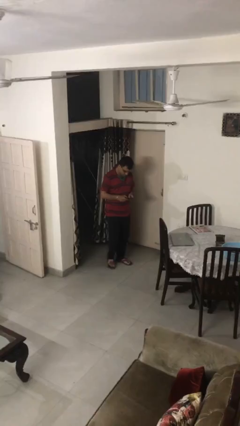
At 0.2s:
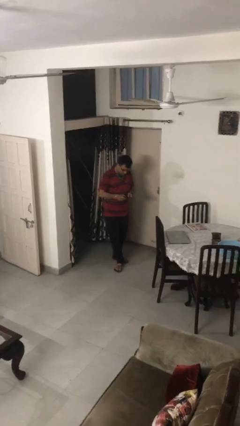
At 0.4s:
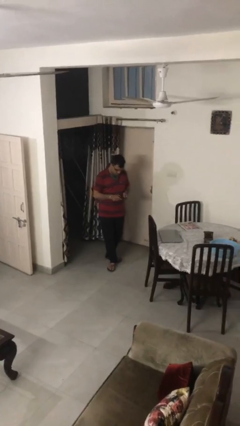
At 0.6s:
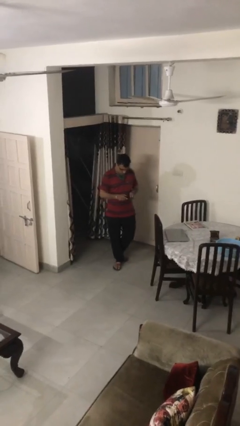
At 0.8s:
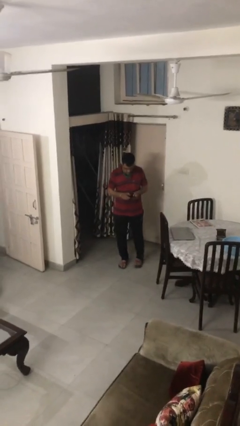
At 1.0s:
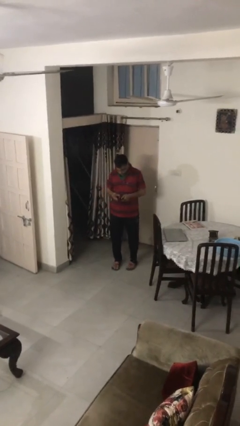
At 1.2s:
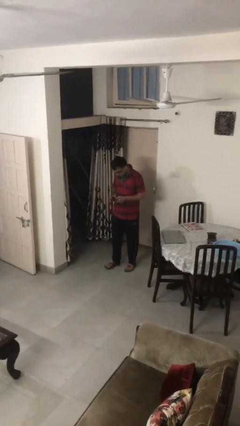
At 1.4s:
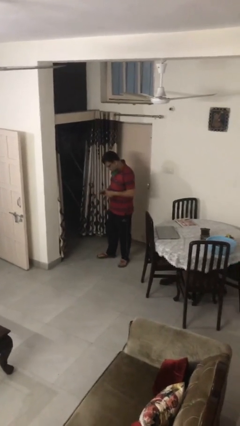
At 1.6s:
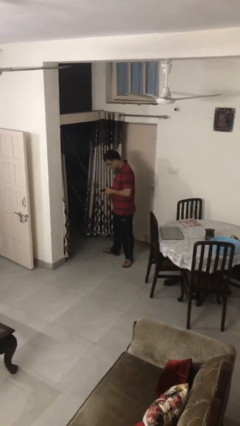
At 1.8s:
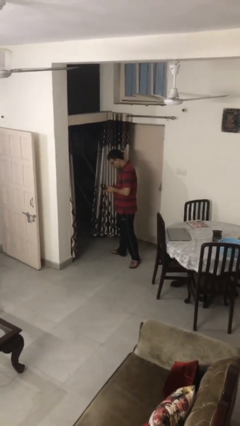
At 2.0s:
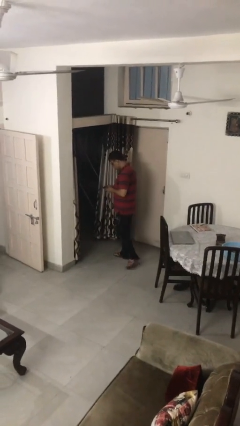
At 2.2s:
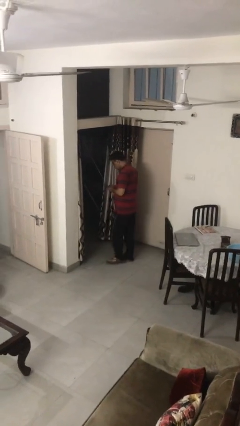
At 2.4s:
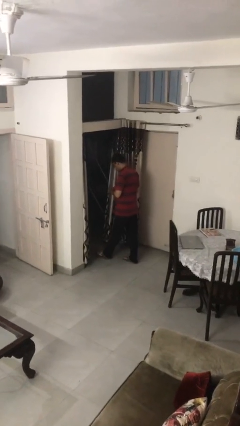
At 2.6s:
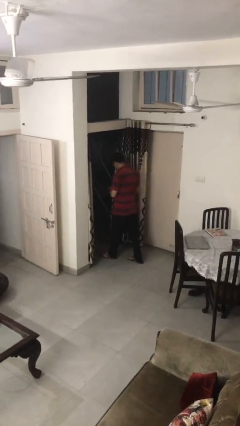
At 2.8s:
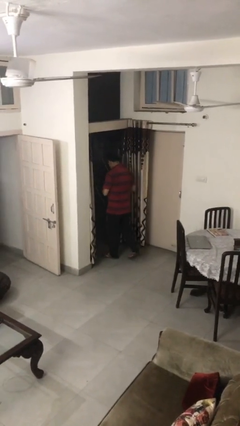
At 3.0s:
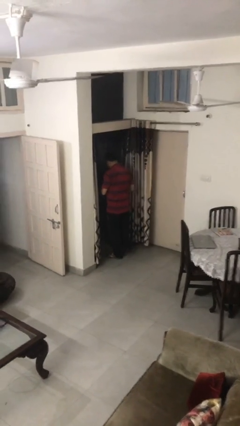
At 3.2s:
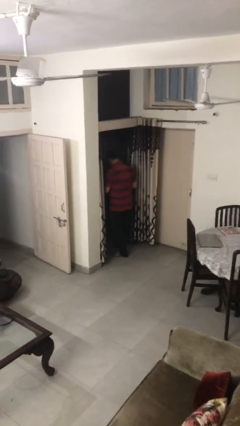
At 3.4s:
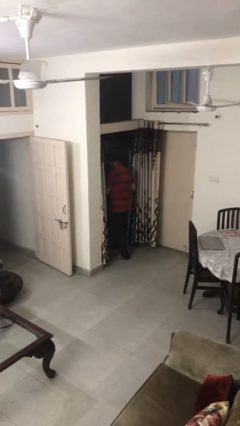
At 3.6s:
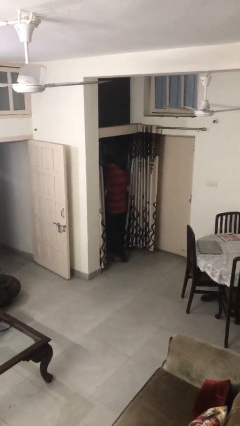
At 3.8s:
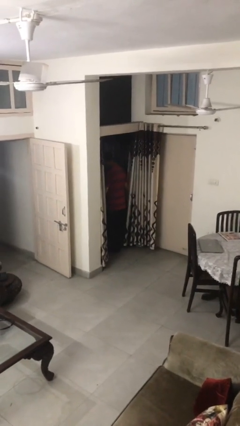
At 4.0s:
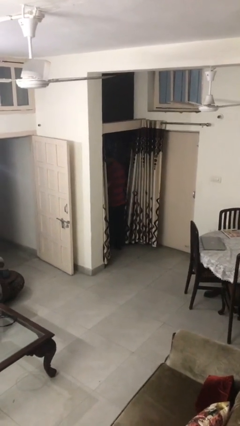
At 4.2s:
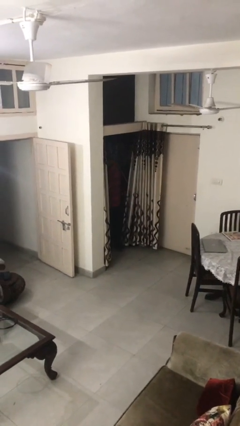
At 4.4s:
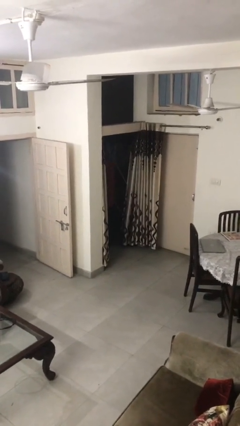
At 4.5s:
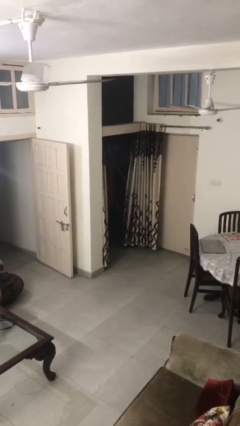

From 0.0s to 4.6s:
person exits scene through structure

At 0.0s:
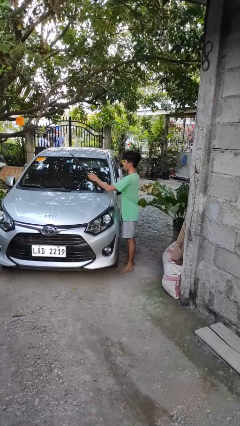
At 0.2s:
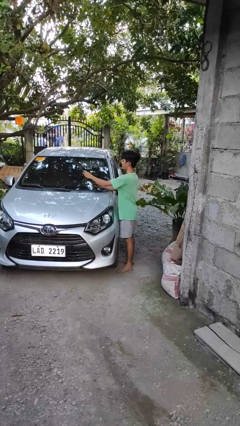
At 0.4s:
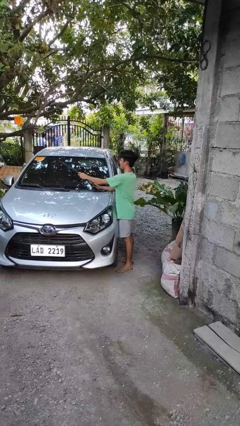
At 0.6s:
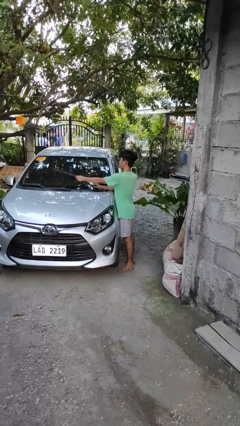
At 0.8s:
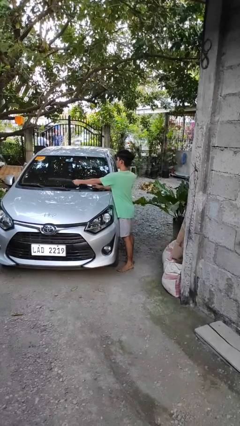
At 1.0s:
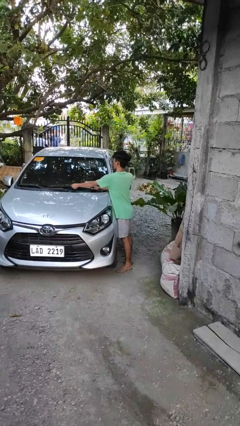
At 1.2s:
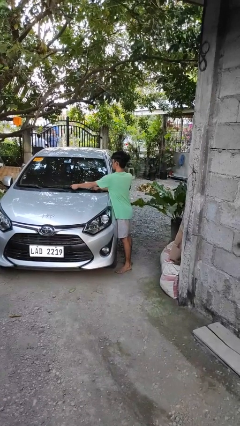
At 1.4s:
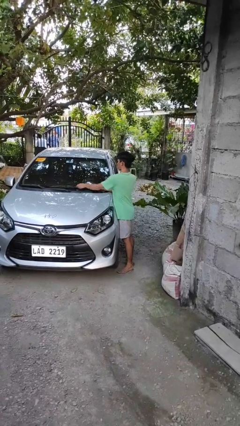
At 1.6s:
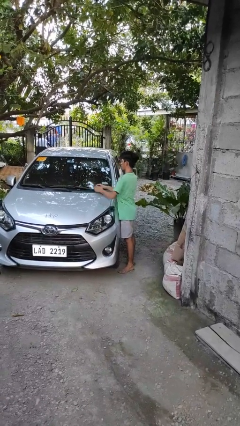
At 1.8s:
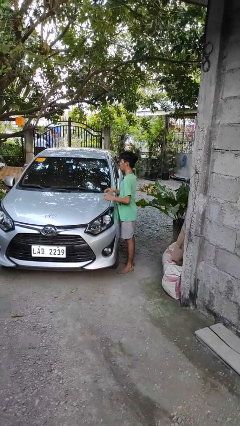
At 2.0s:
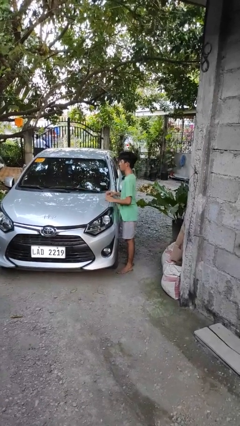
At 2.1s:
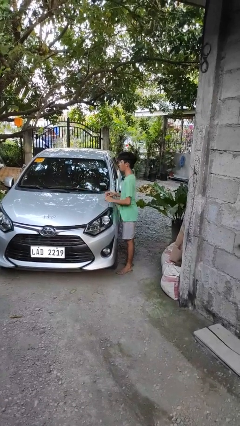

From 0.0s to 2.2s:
person flips down car wipers

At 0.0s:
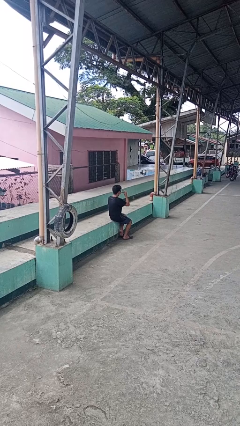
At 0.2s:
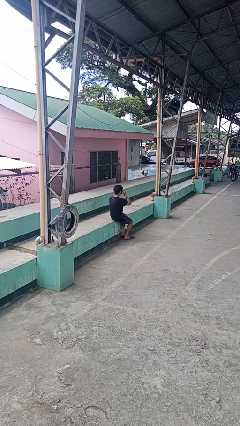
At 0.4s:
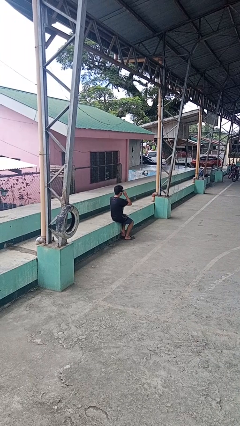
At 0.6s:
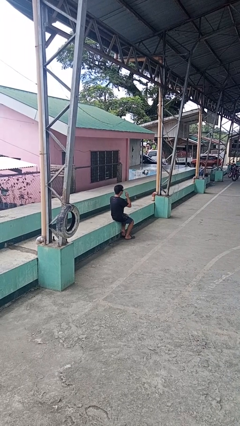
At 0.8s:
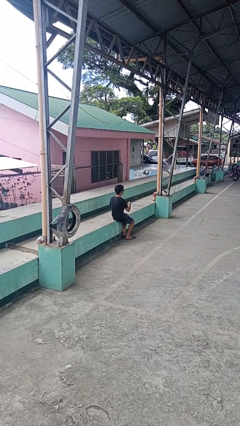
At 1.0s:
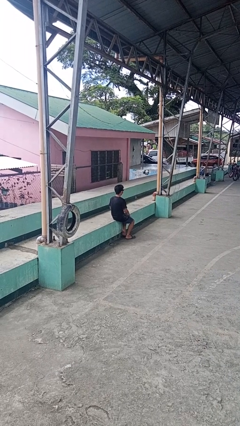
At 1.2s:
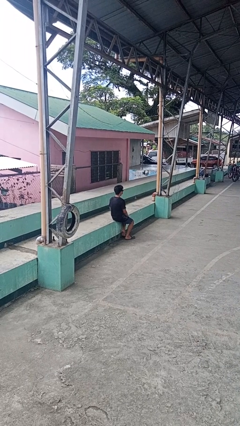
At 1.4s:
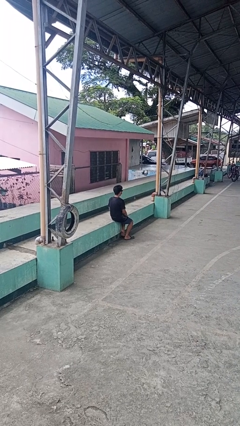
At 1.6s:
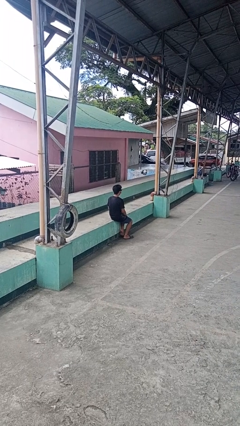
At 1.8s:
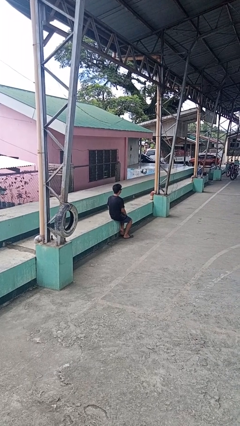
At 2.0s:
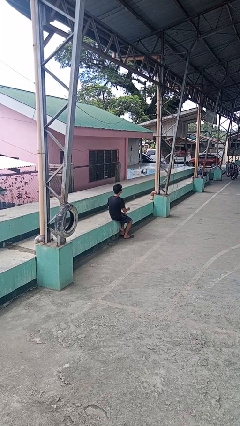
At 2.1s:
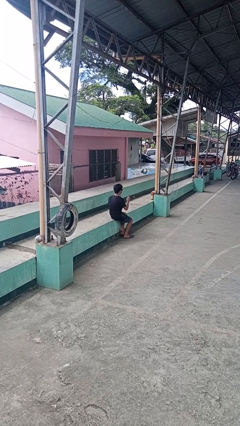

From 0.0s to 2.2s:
person puts on sunglasses

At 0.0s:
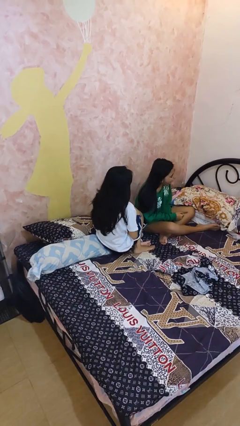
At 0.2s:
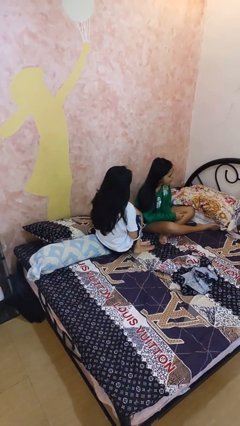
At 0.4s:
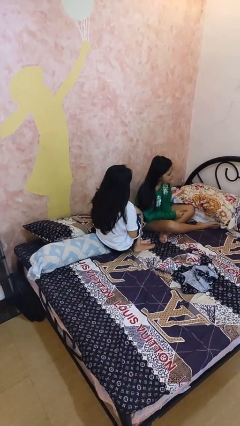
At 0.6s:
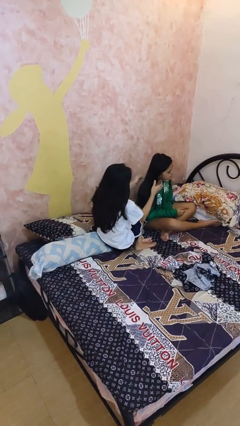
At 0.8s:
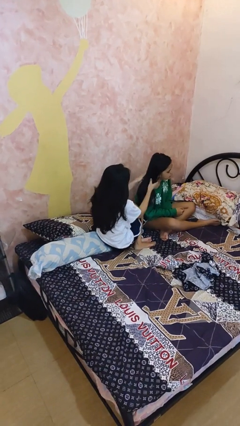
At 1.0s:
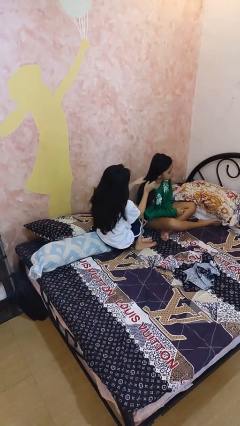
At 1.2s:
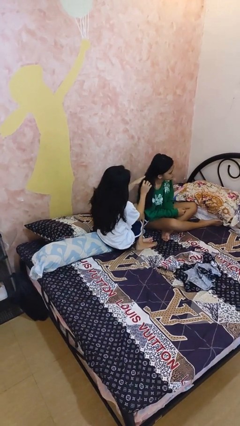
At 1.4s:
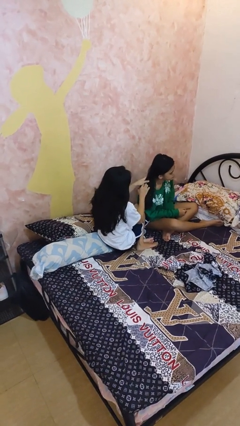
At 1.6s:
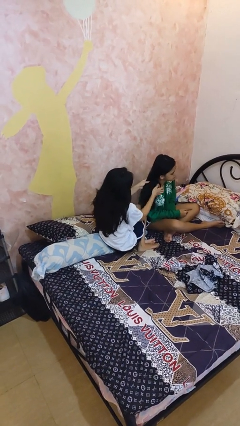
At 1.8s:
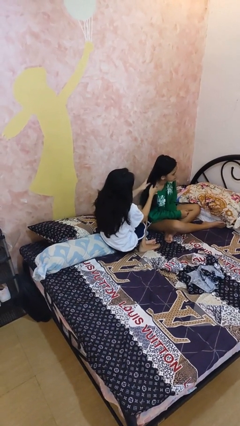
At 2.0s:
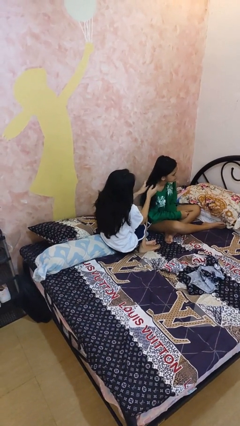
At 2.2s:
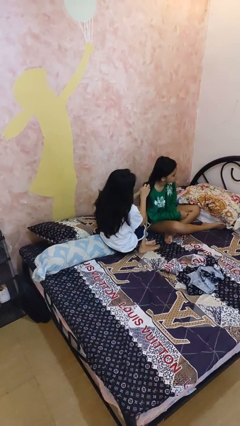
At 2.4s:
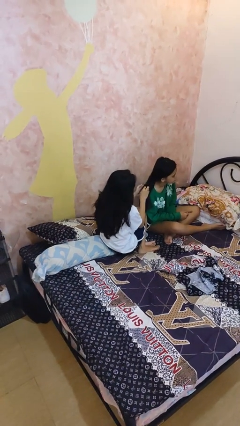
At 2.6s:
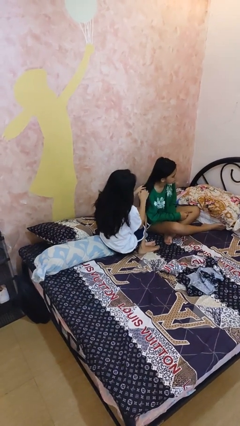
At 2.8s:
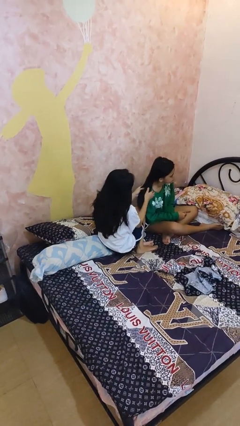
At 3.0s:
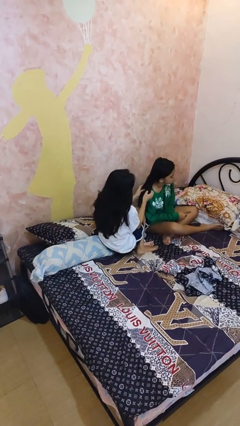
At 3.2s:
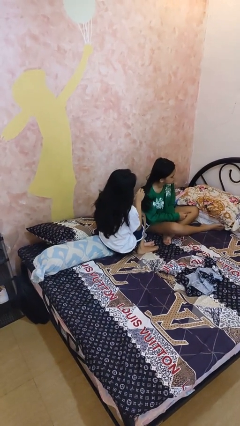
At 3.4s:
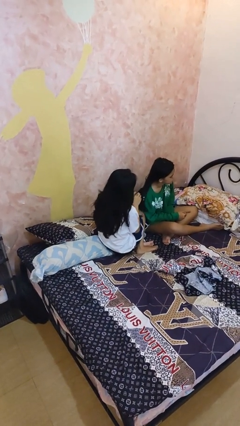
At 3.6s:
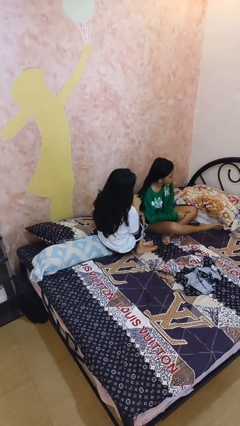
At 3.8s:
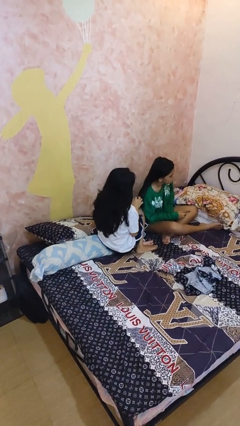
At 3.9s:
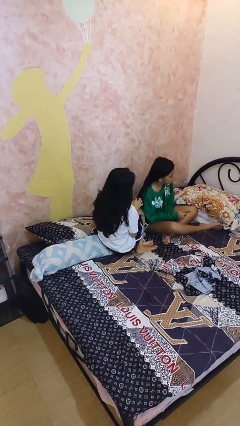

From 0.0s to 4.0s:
person braids hair of person

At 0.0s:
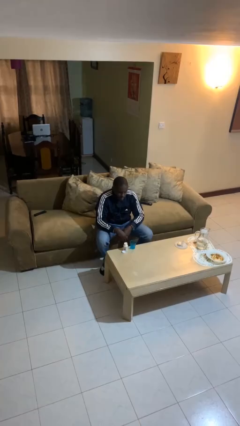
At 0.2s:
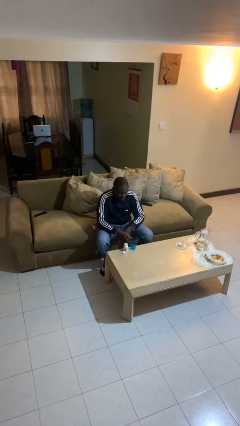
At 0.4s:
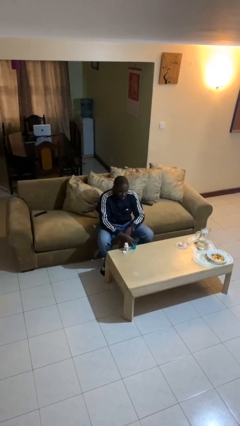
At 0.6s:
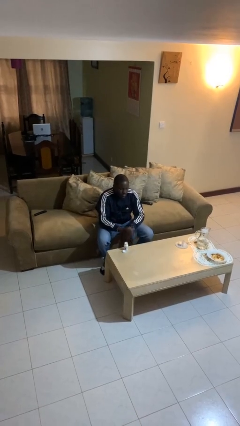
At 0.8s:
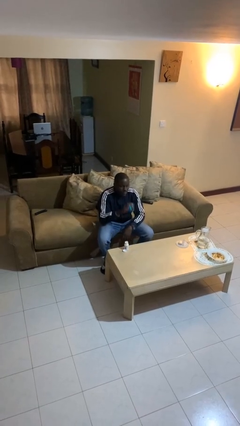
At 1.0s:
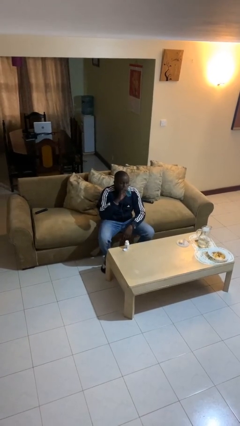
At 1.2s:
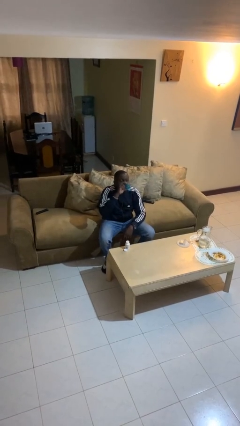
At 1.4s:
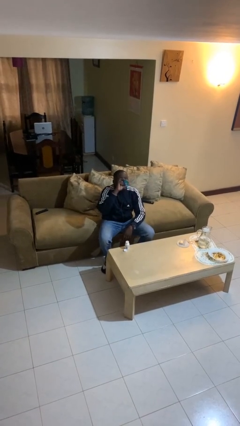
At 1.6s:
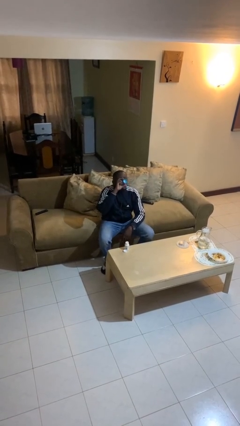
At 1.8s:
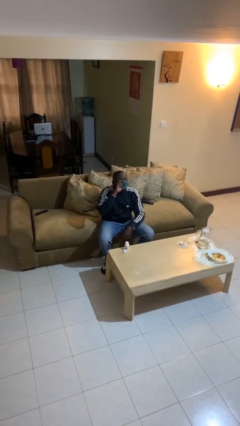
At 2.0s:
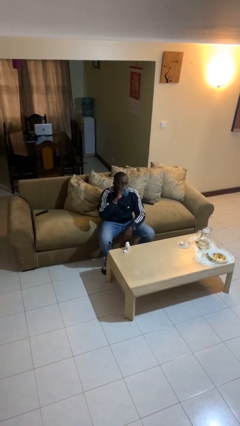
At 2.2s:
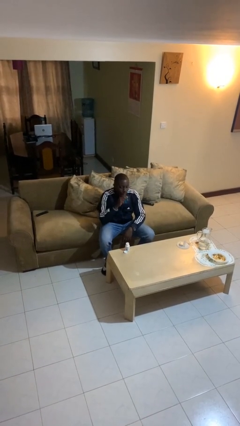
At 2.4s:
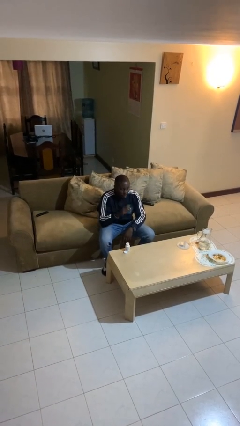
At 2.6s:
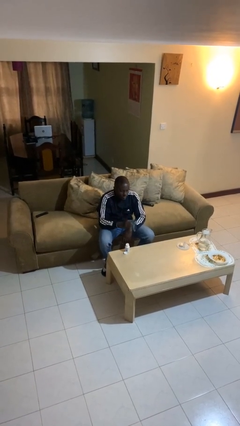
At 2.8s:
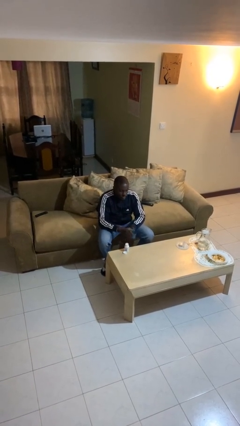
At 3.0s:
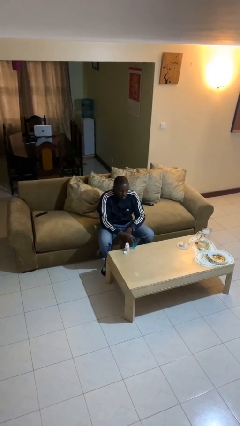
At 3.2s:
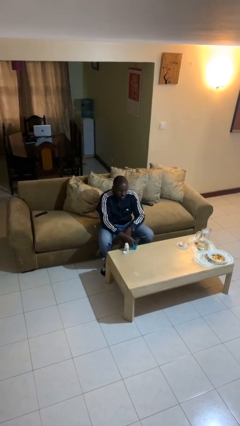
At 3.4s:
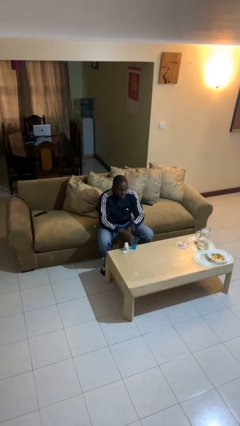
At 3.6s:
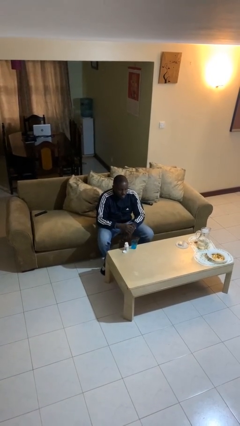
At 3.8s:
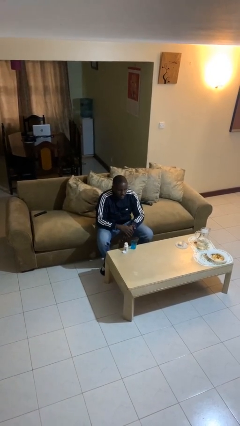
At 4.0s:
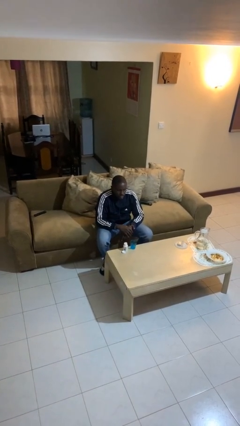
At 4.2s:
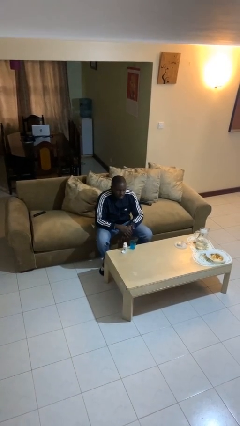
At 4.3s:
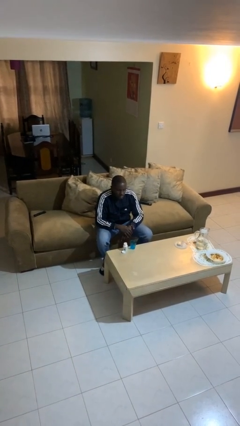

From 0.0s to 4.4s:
person drinks from cup

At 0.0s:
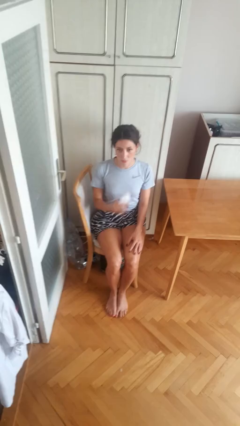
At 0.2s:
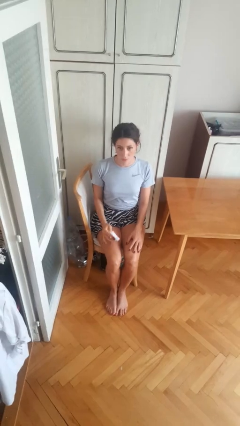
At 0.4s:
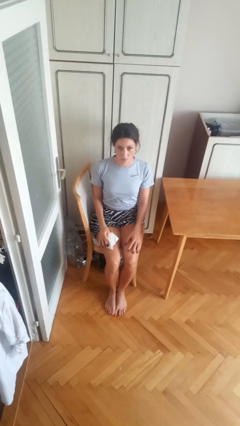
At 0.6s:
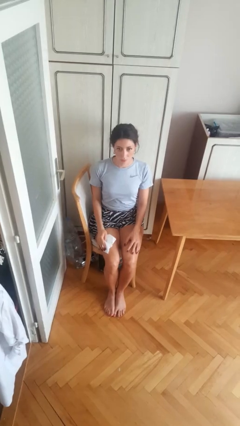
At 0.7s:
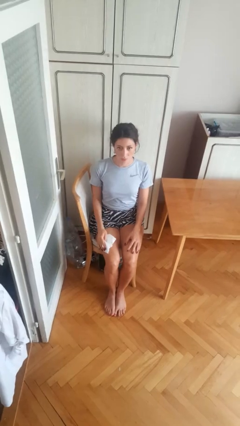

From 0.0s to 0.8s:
person wipes mouth with napkin
